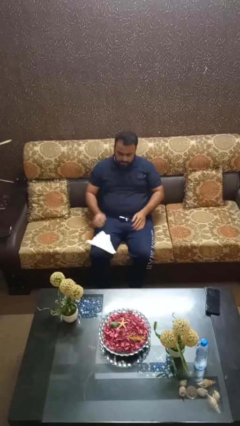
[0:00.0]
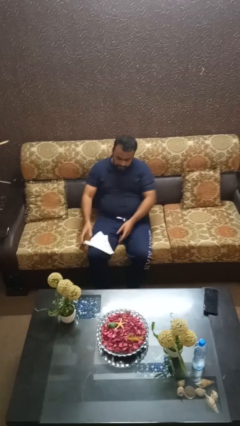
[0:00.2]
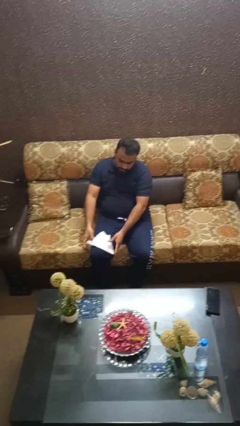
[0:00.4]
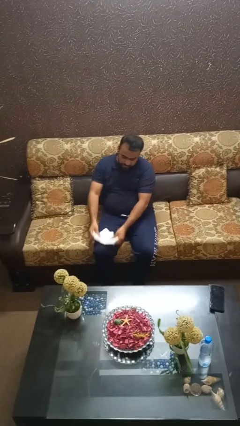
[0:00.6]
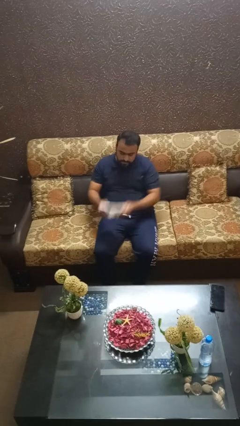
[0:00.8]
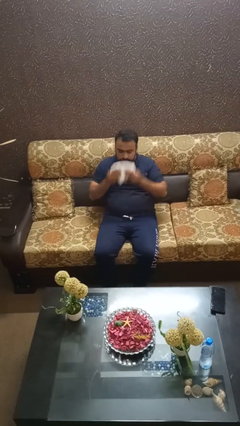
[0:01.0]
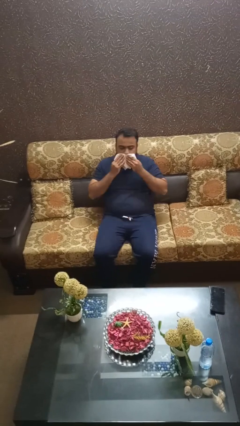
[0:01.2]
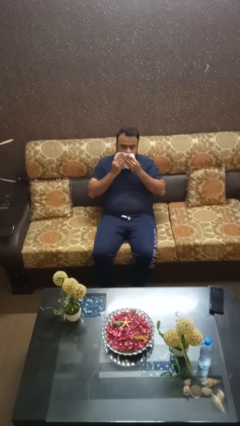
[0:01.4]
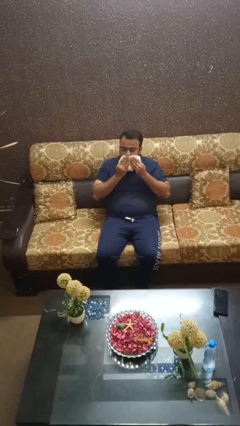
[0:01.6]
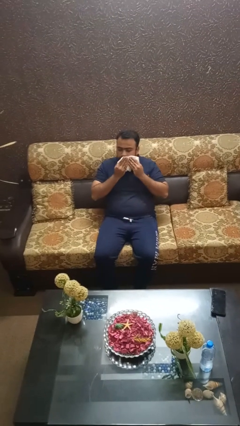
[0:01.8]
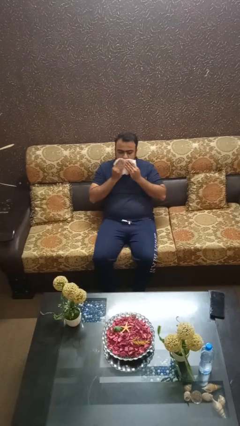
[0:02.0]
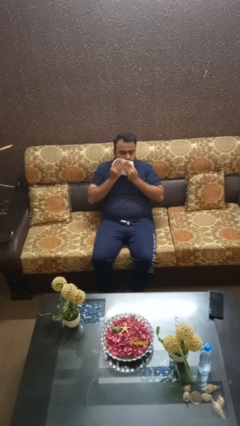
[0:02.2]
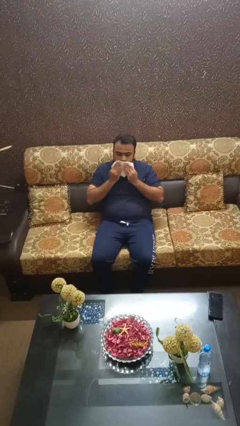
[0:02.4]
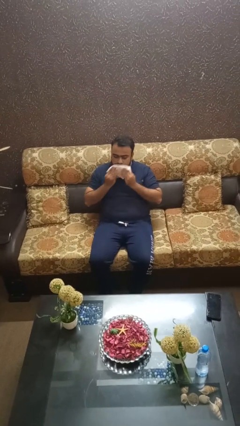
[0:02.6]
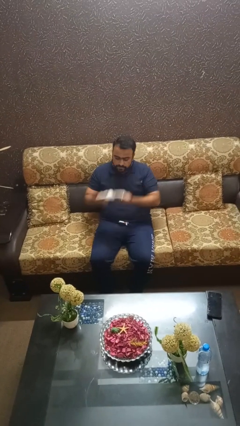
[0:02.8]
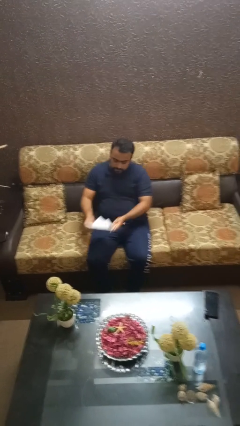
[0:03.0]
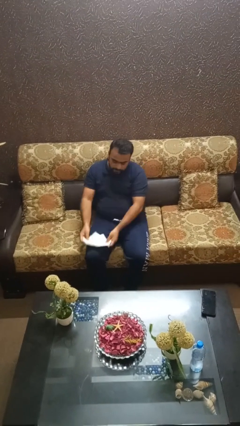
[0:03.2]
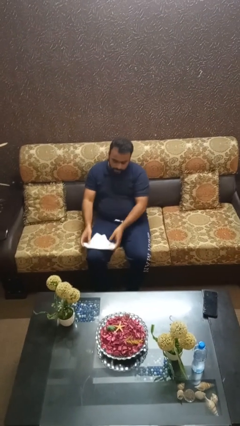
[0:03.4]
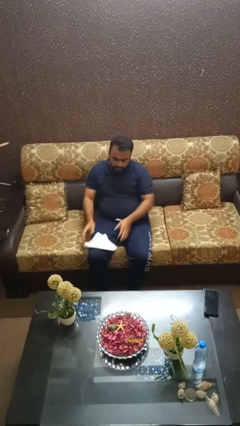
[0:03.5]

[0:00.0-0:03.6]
person wipes mouth with napkin

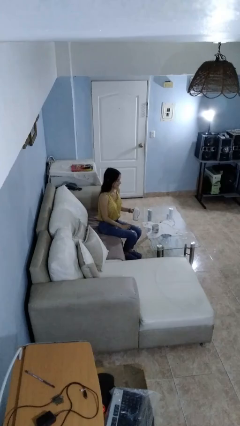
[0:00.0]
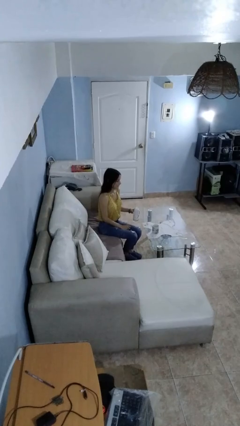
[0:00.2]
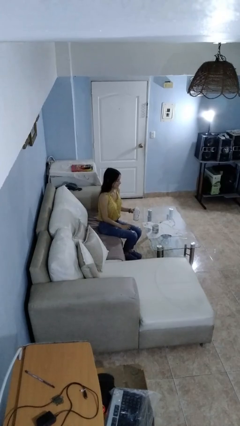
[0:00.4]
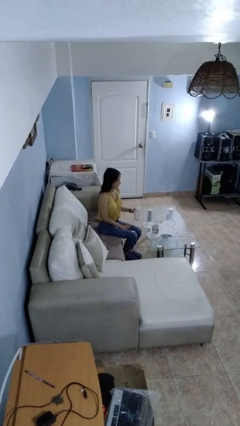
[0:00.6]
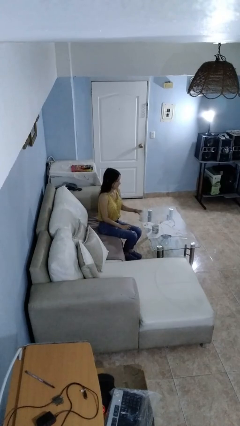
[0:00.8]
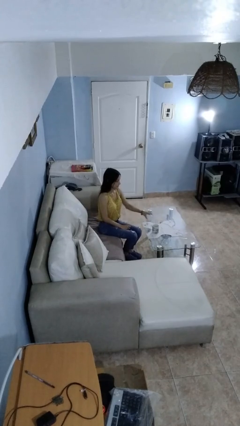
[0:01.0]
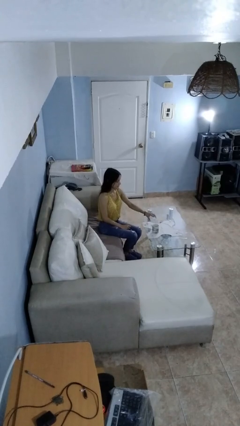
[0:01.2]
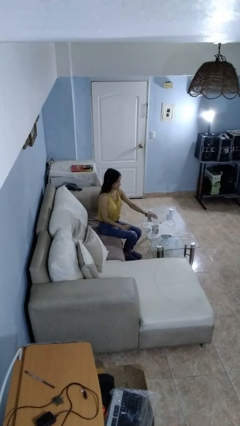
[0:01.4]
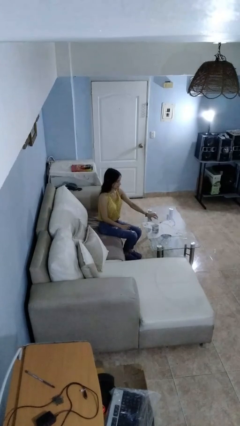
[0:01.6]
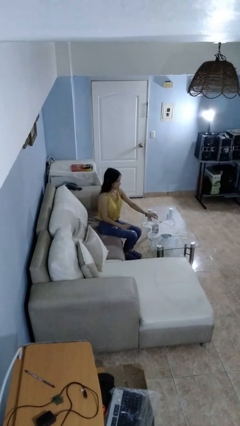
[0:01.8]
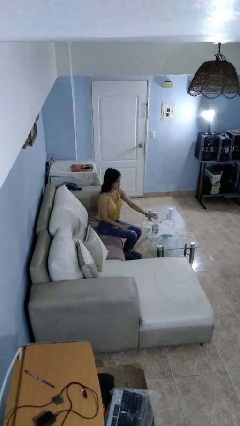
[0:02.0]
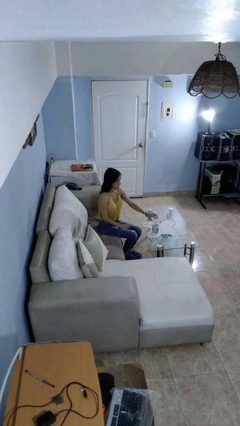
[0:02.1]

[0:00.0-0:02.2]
person pours liquid into cup

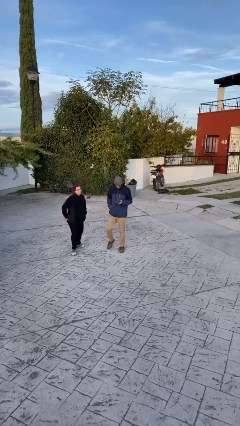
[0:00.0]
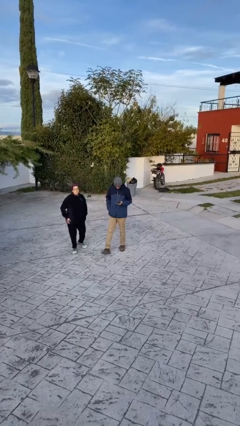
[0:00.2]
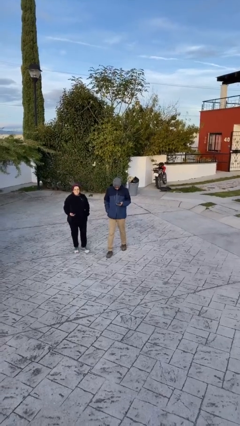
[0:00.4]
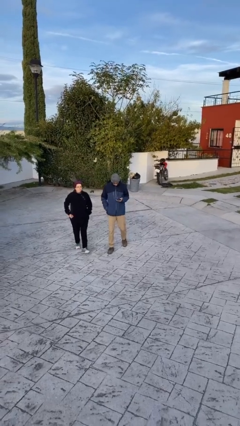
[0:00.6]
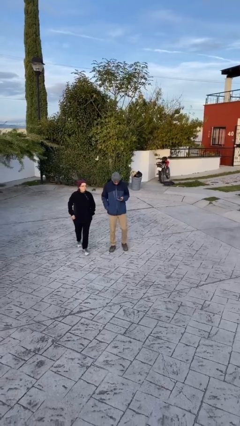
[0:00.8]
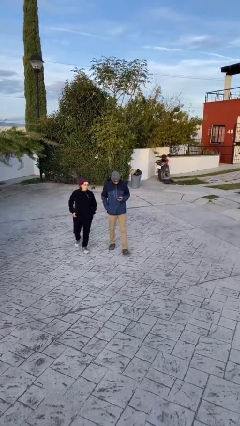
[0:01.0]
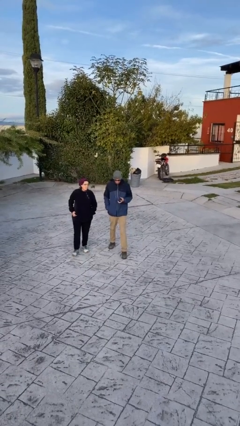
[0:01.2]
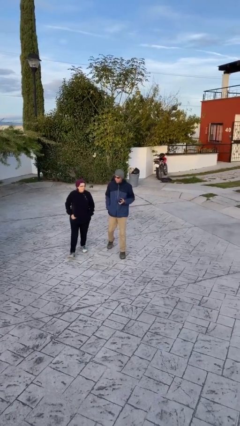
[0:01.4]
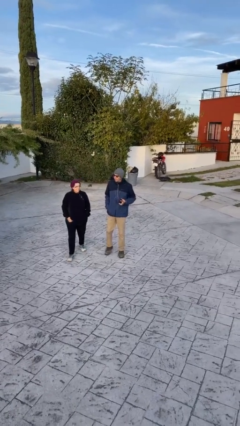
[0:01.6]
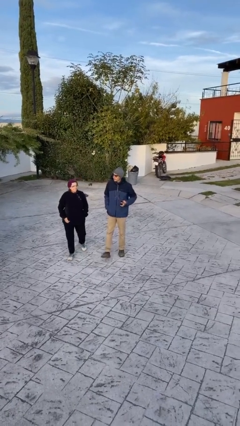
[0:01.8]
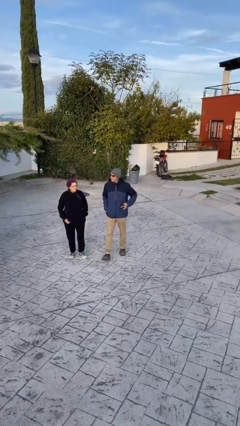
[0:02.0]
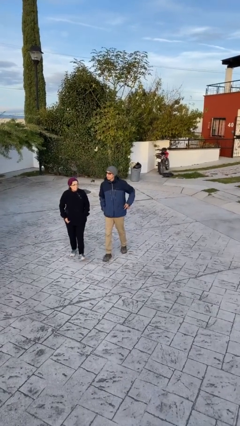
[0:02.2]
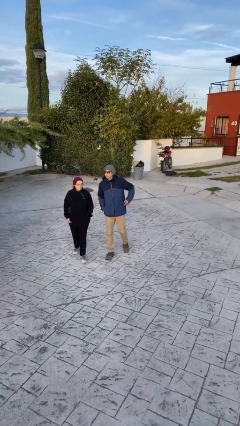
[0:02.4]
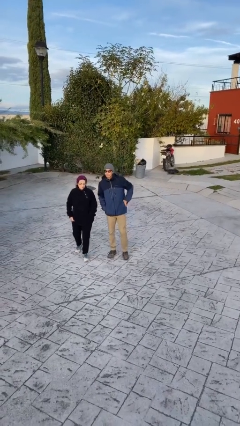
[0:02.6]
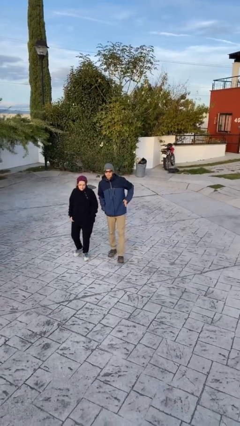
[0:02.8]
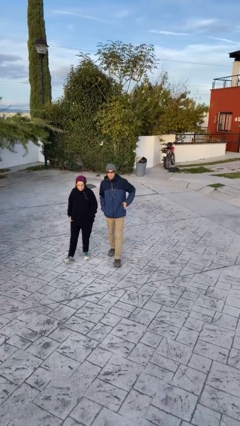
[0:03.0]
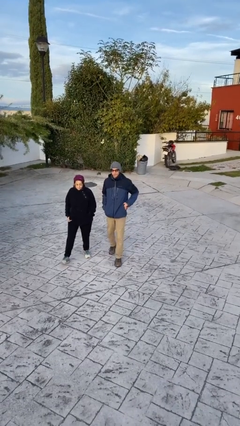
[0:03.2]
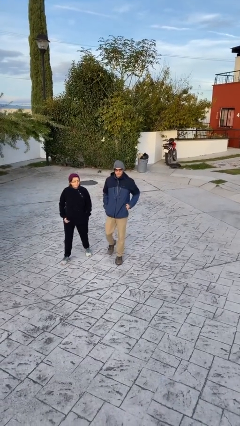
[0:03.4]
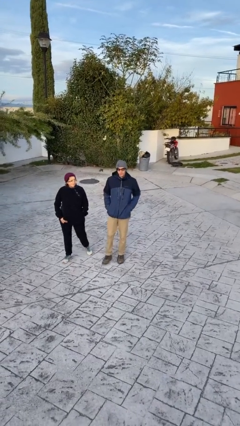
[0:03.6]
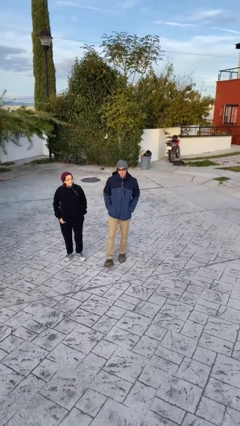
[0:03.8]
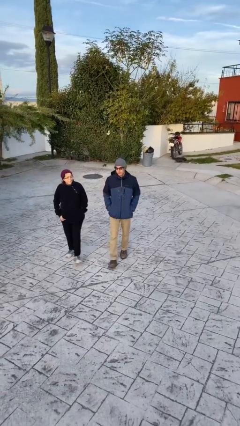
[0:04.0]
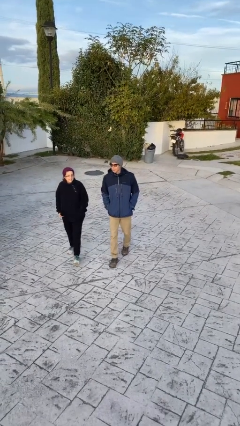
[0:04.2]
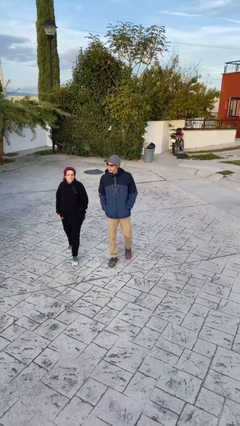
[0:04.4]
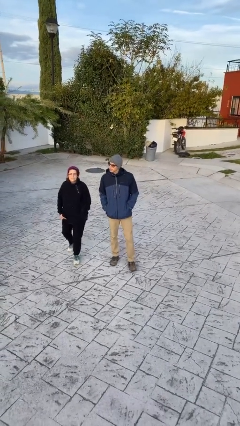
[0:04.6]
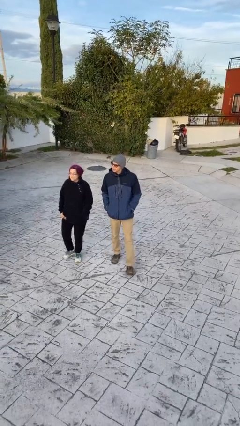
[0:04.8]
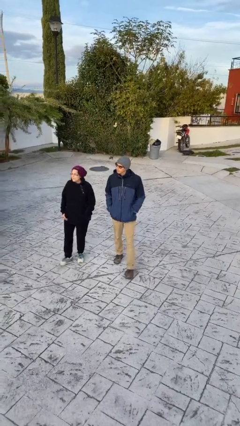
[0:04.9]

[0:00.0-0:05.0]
person talks to person

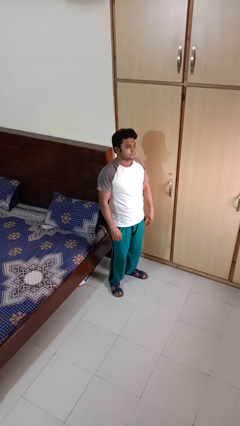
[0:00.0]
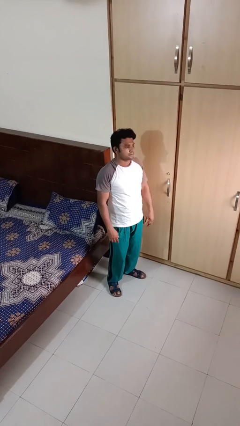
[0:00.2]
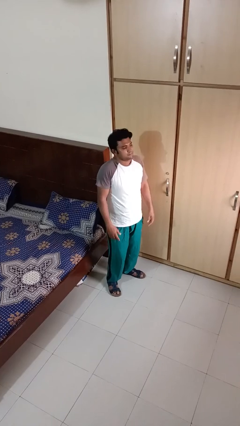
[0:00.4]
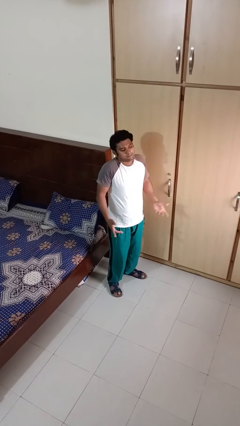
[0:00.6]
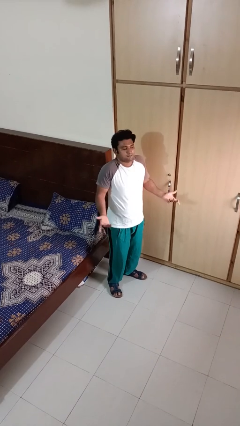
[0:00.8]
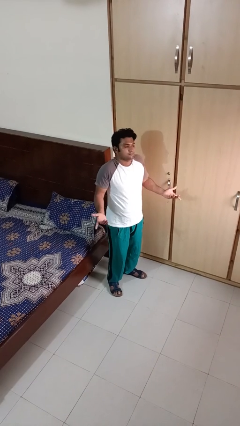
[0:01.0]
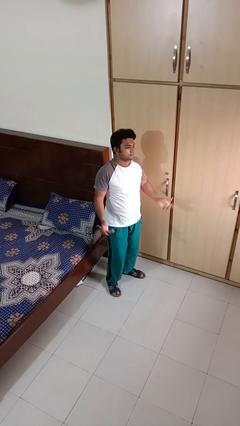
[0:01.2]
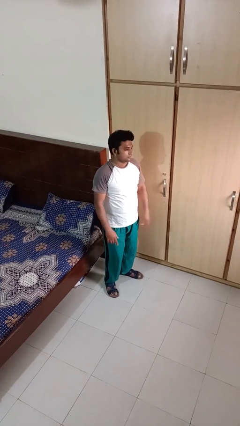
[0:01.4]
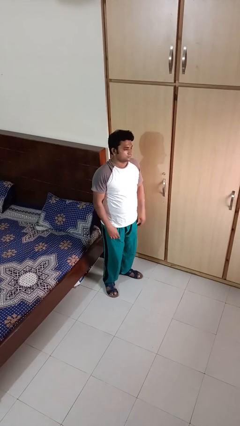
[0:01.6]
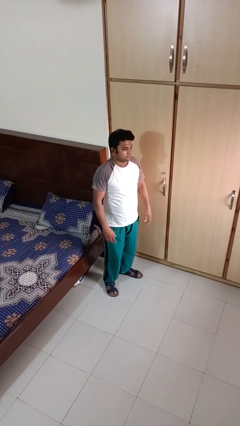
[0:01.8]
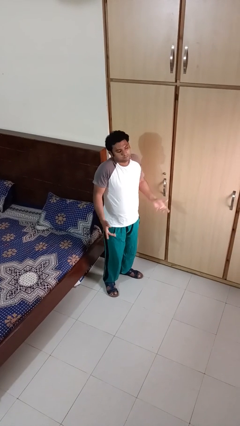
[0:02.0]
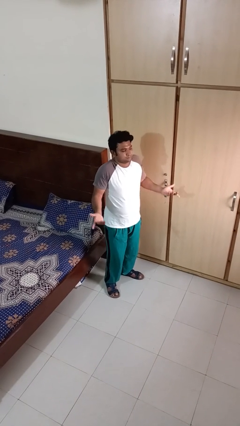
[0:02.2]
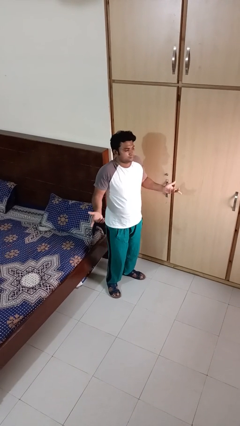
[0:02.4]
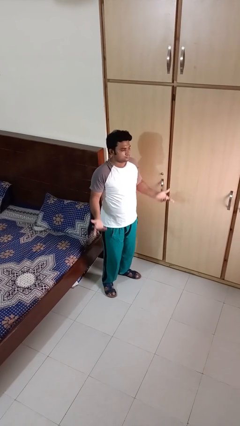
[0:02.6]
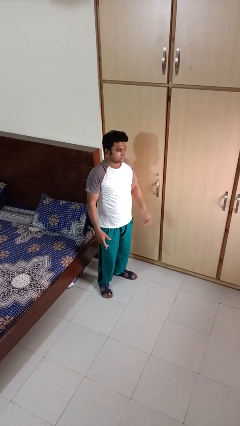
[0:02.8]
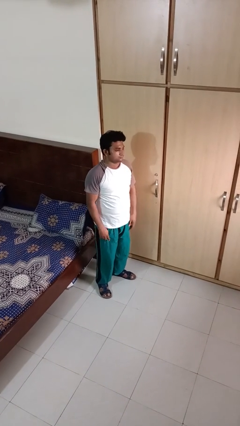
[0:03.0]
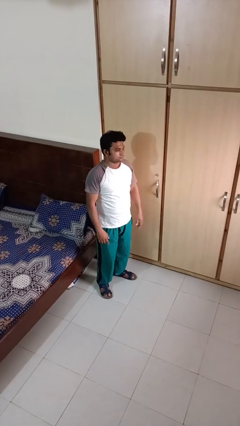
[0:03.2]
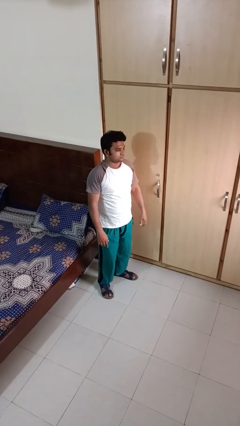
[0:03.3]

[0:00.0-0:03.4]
person shrugs

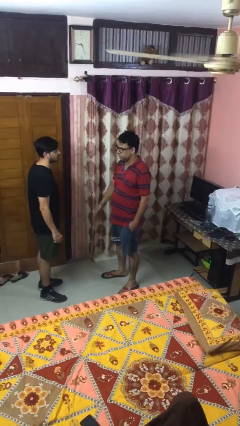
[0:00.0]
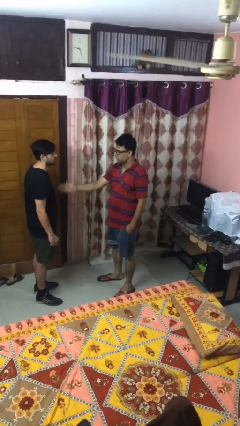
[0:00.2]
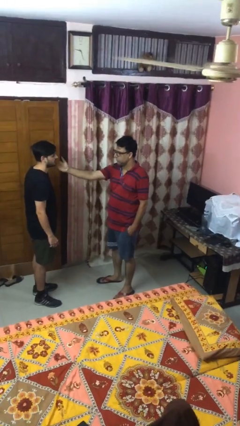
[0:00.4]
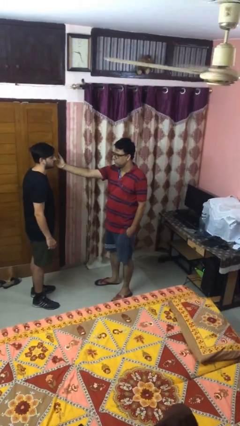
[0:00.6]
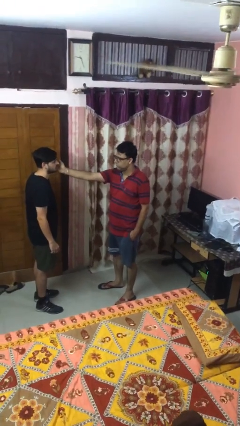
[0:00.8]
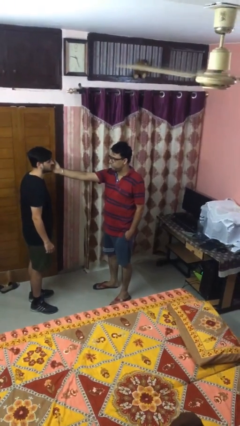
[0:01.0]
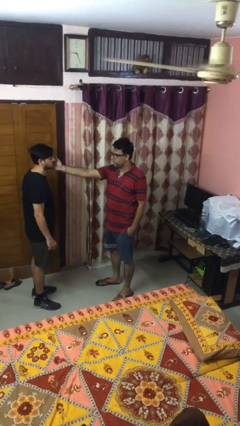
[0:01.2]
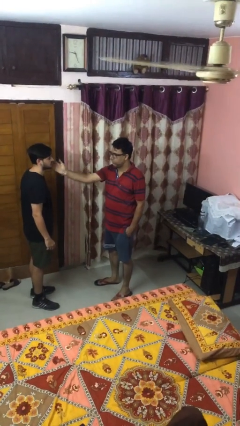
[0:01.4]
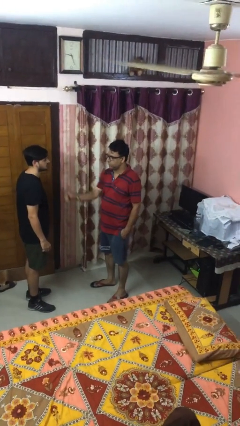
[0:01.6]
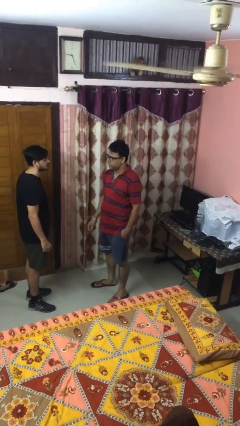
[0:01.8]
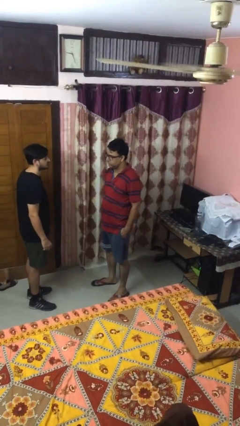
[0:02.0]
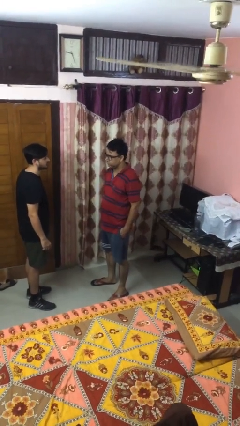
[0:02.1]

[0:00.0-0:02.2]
person touches face of person

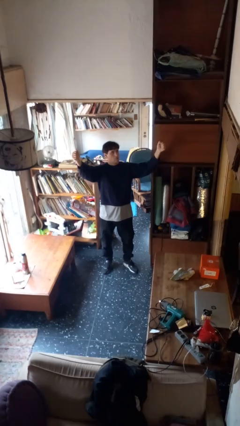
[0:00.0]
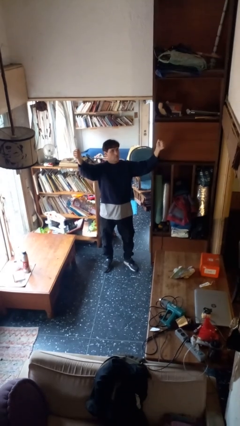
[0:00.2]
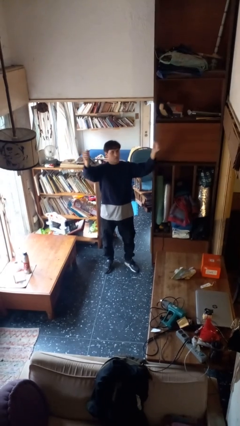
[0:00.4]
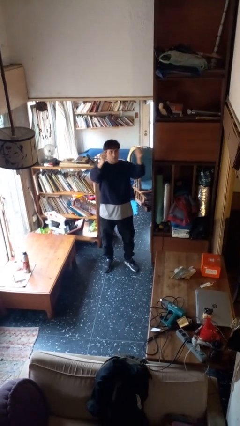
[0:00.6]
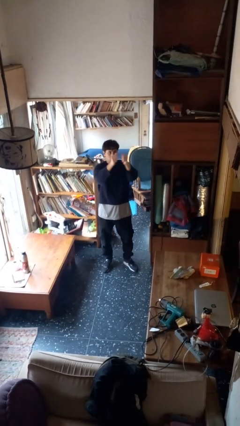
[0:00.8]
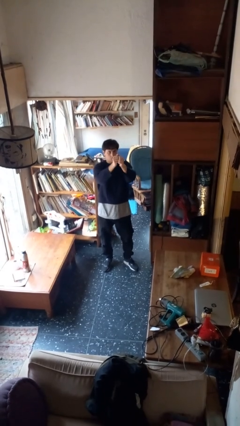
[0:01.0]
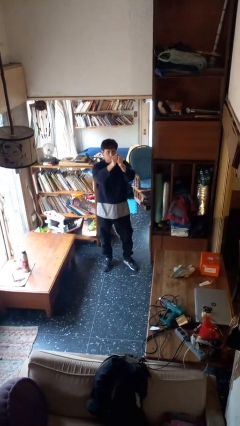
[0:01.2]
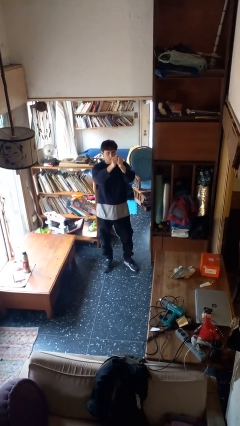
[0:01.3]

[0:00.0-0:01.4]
person gestures zoom out
